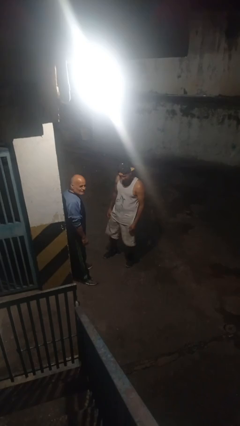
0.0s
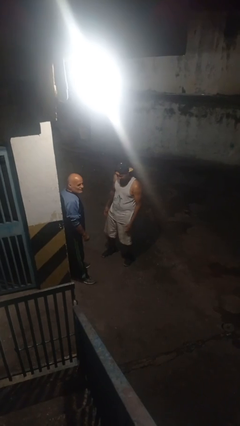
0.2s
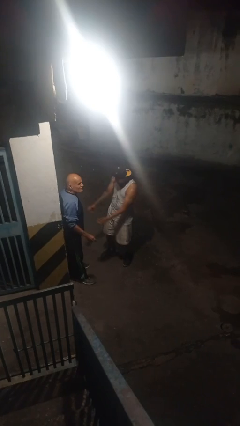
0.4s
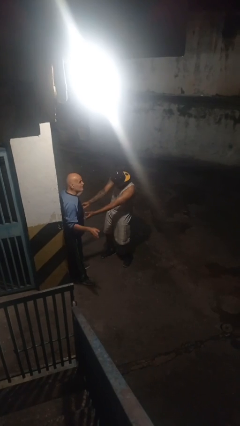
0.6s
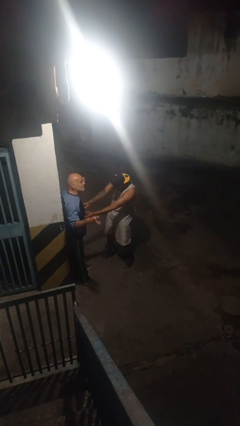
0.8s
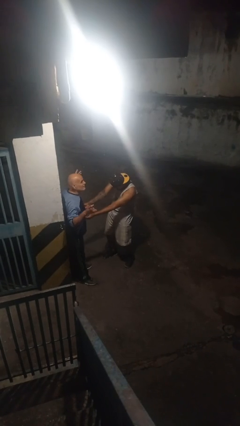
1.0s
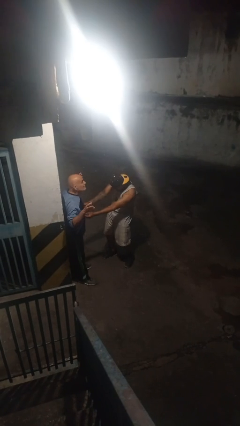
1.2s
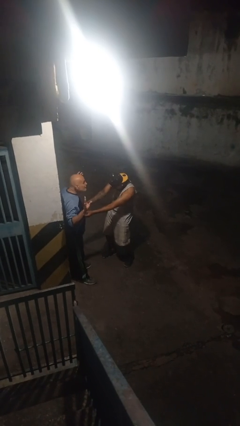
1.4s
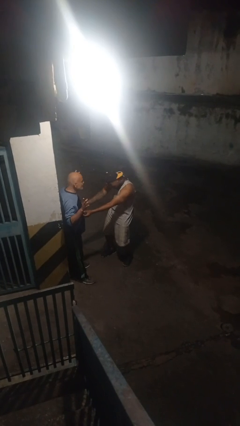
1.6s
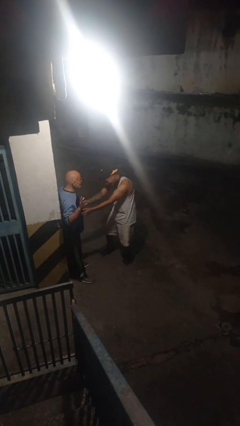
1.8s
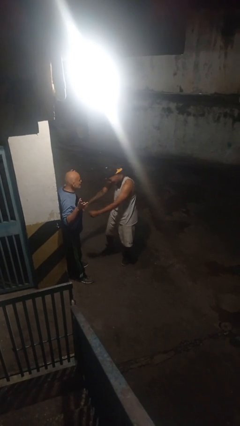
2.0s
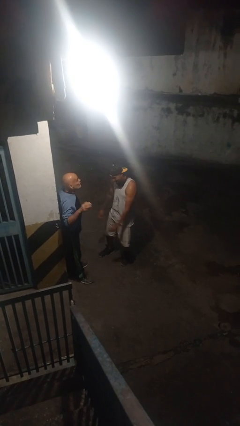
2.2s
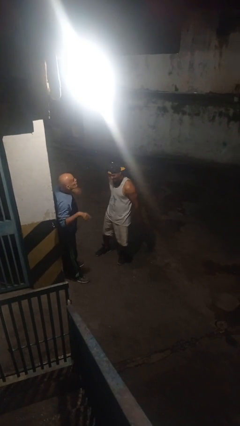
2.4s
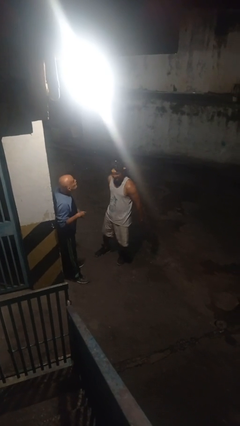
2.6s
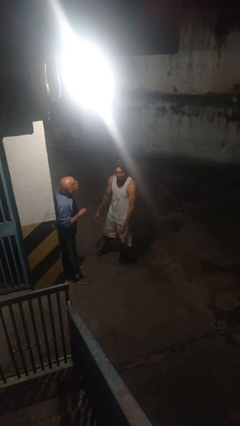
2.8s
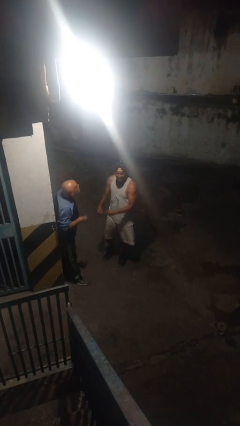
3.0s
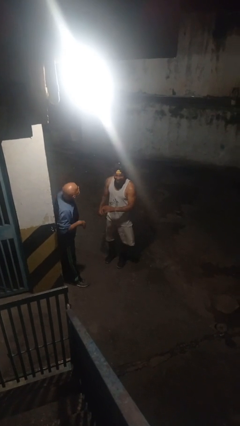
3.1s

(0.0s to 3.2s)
person tickles person

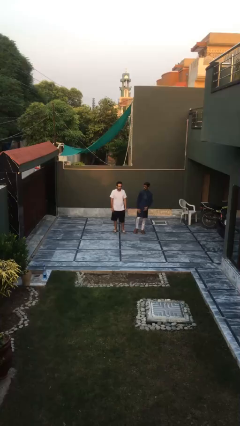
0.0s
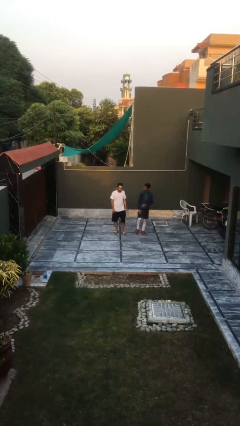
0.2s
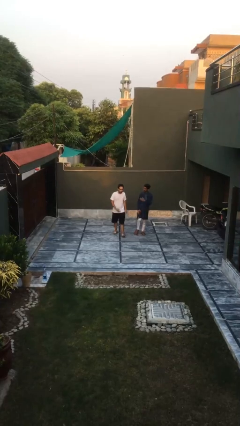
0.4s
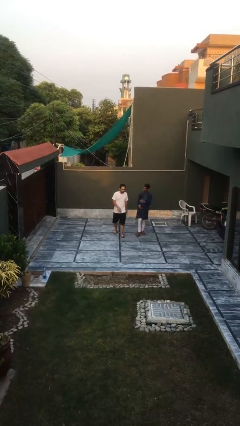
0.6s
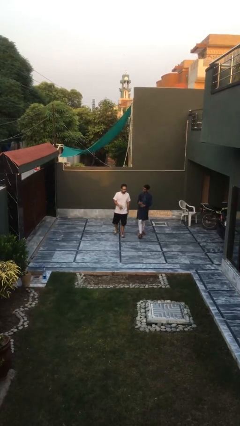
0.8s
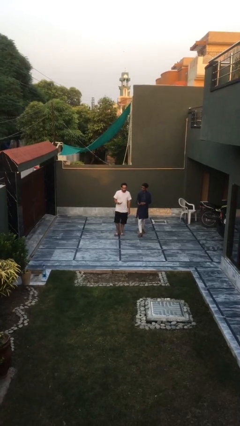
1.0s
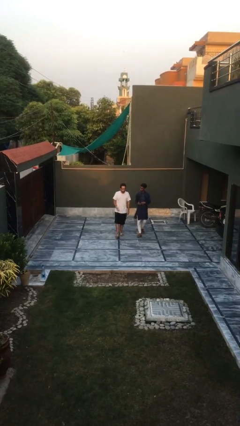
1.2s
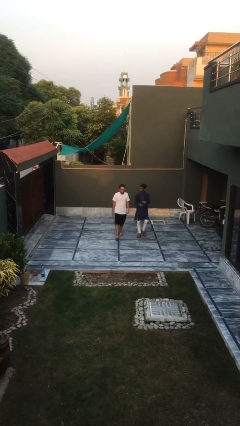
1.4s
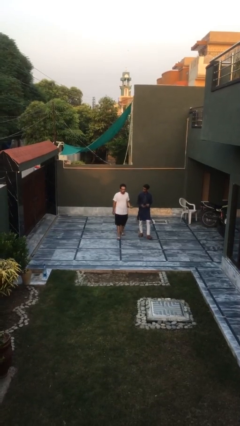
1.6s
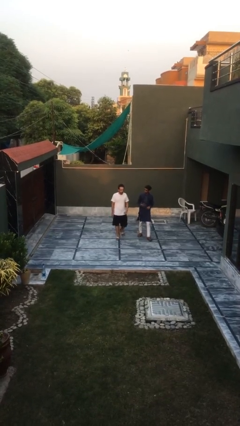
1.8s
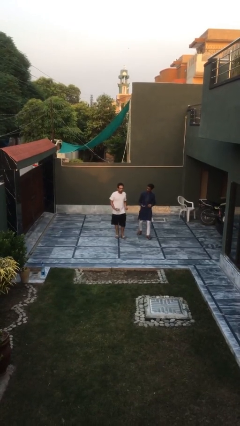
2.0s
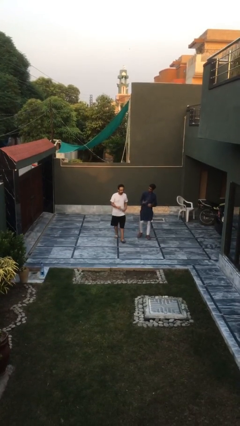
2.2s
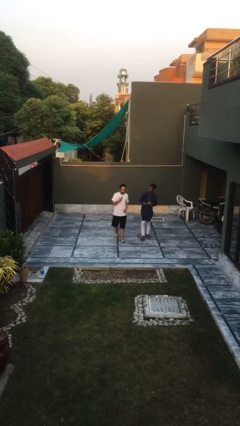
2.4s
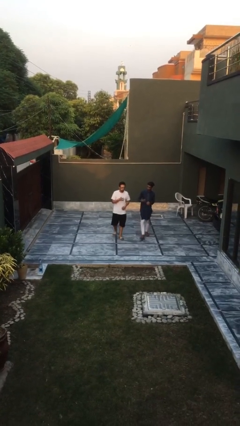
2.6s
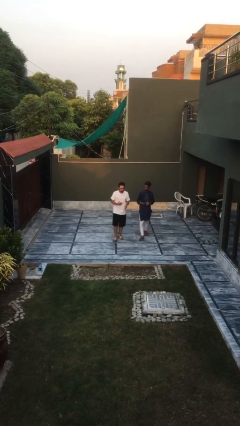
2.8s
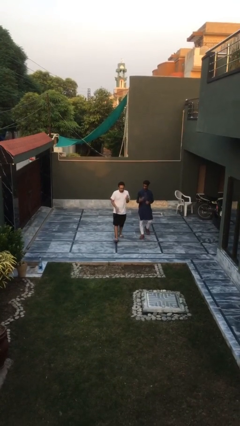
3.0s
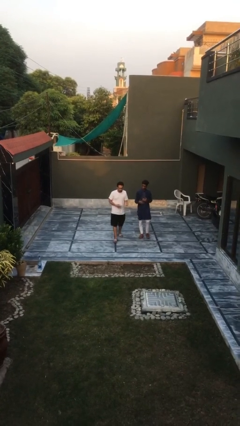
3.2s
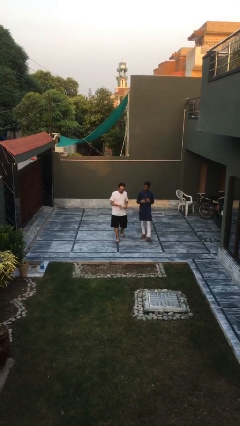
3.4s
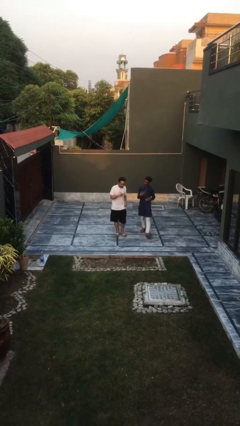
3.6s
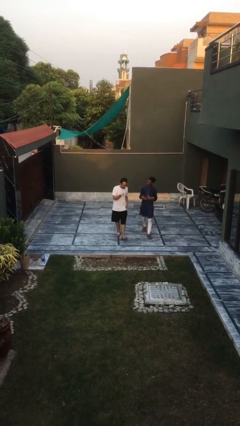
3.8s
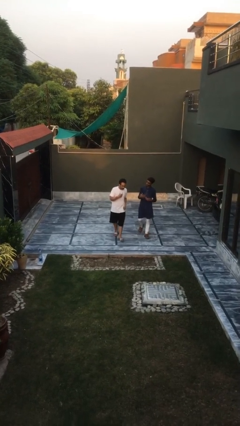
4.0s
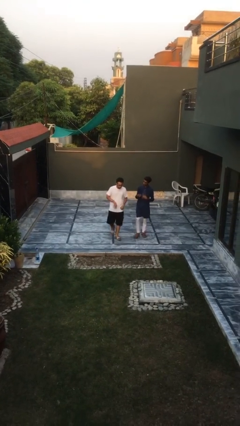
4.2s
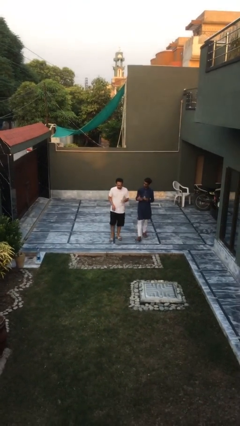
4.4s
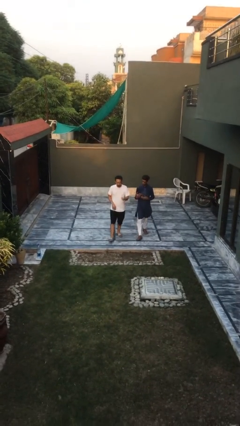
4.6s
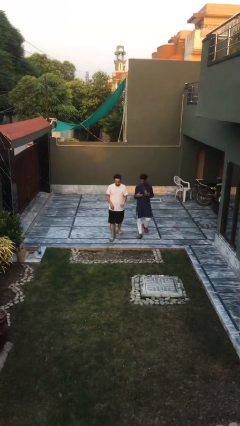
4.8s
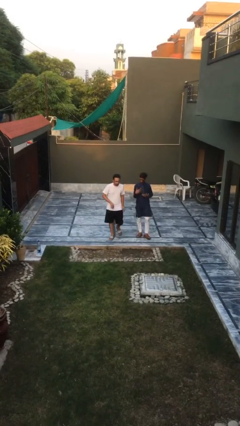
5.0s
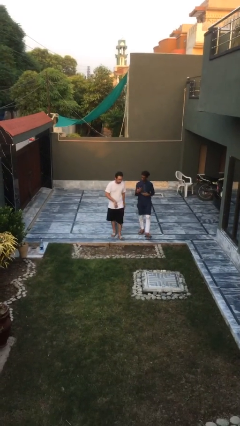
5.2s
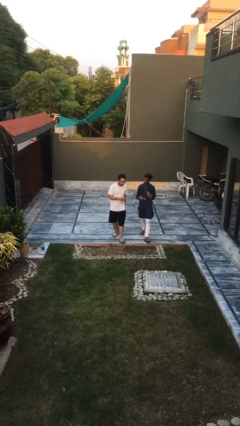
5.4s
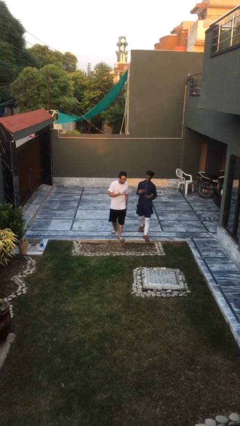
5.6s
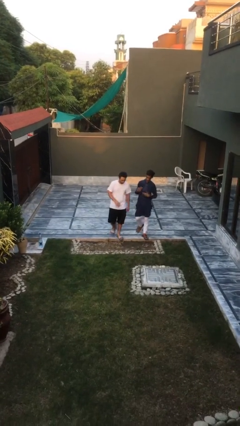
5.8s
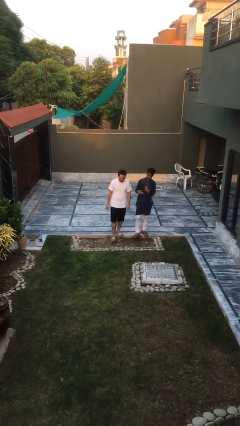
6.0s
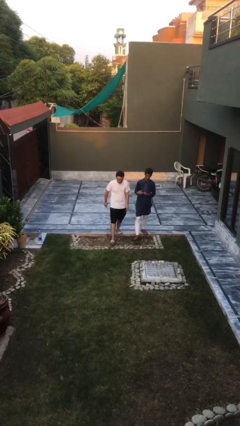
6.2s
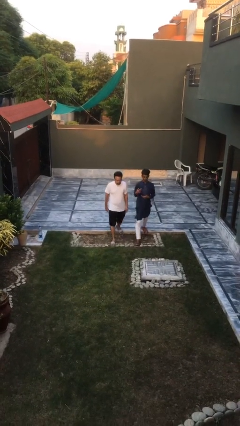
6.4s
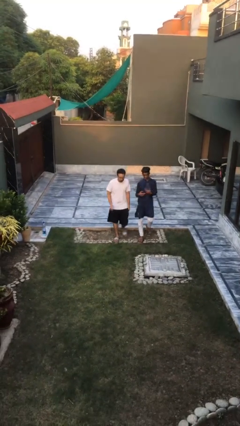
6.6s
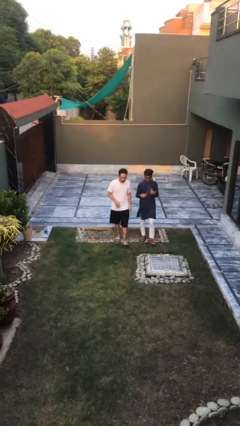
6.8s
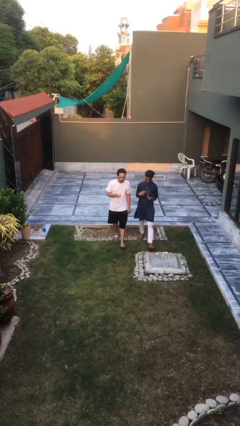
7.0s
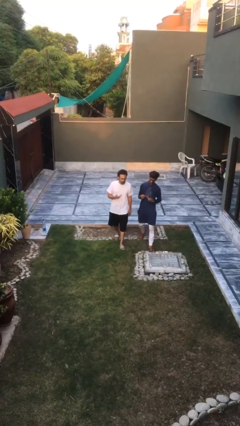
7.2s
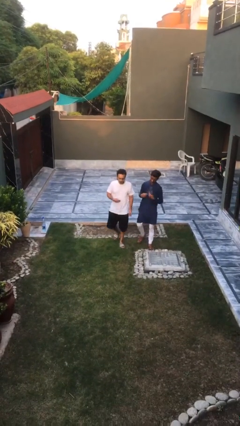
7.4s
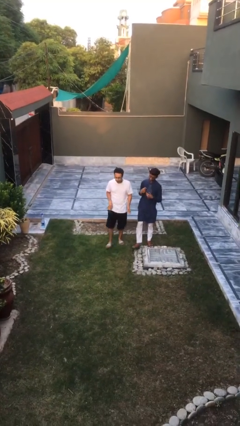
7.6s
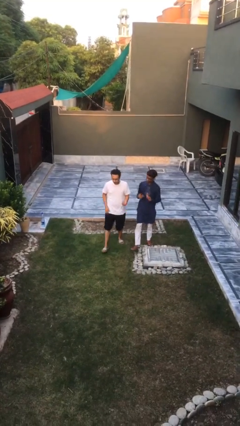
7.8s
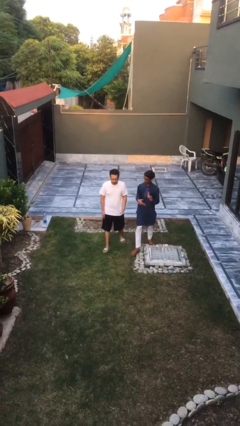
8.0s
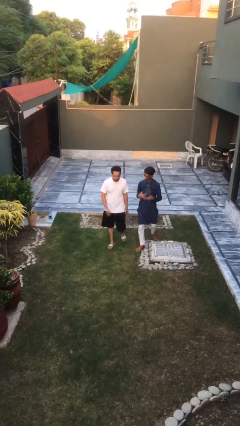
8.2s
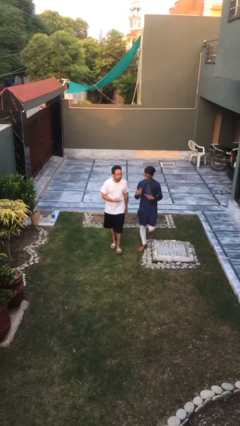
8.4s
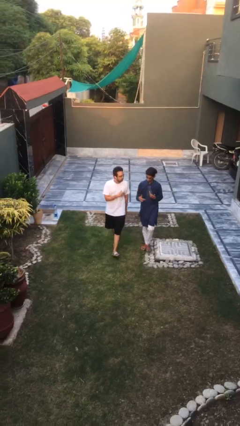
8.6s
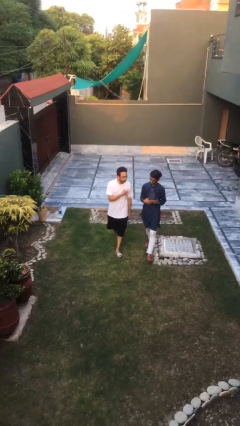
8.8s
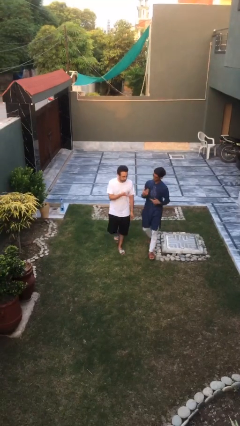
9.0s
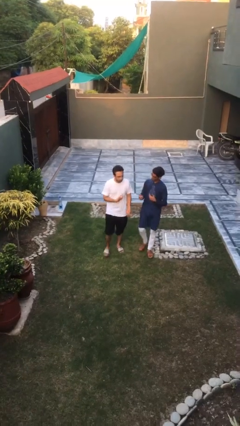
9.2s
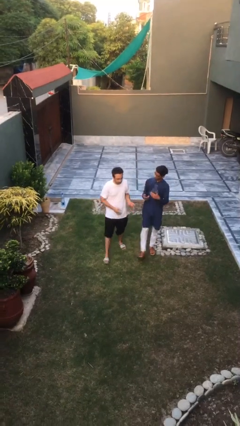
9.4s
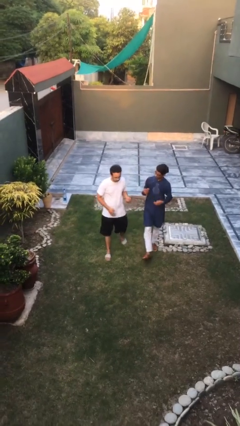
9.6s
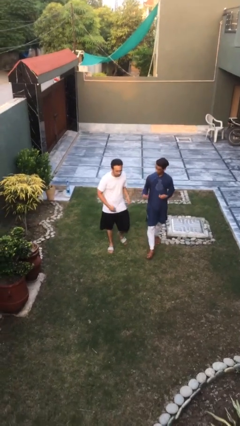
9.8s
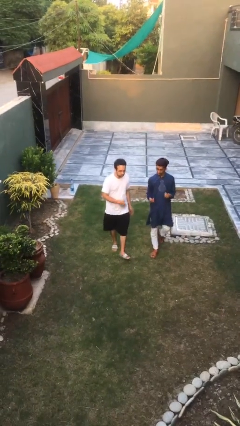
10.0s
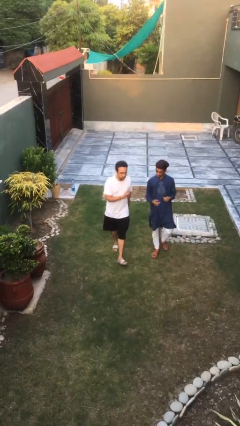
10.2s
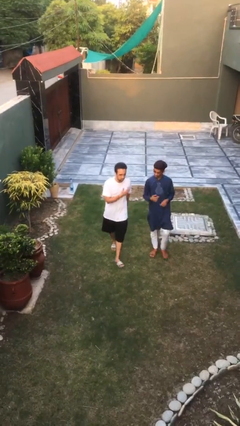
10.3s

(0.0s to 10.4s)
person talks to person

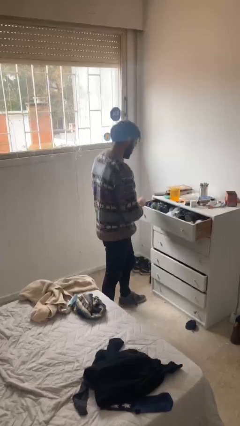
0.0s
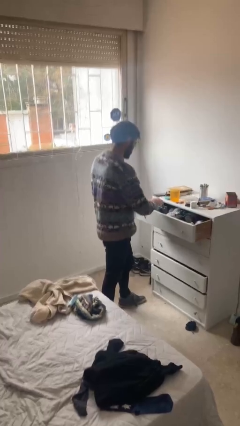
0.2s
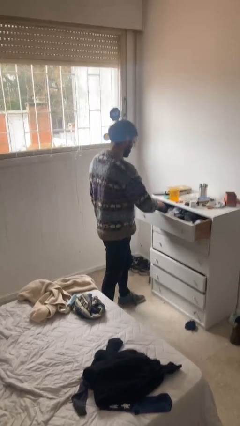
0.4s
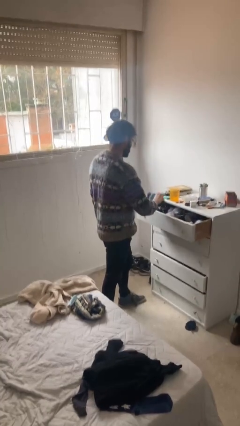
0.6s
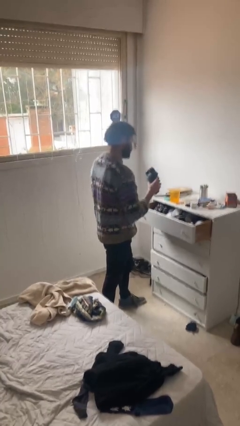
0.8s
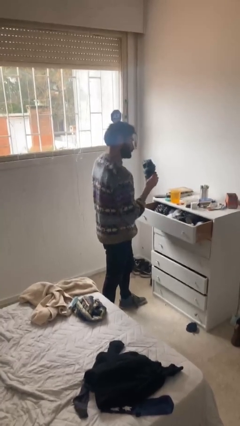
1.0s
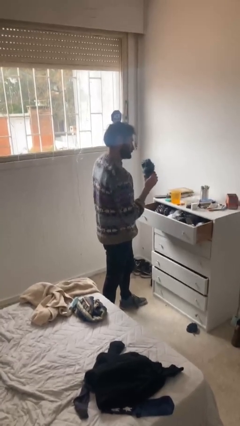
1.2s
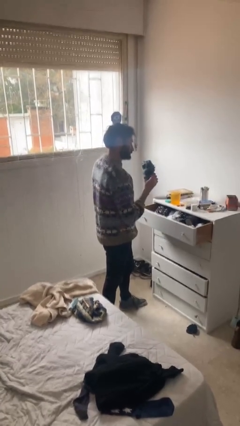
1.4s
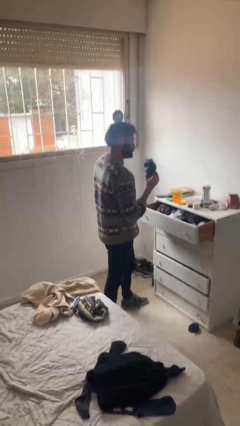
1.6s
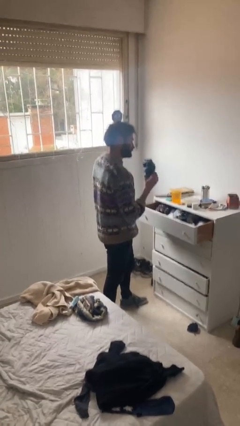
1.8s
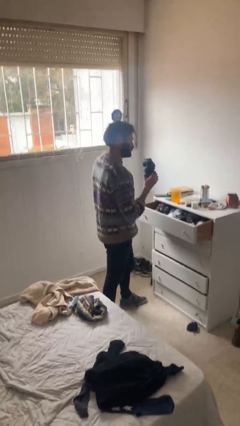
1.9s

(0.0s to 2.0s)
person takes clothes from dresser

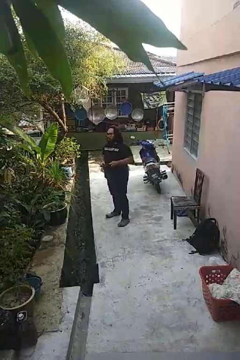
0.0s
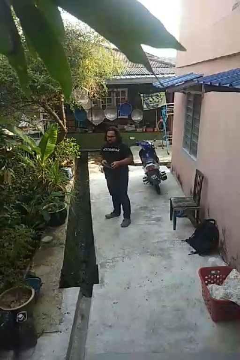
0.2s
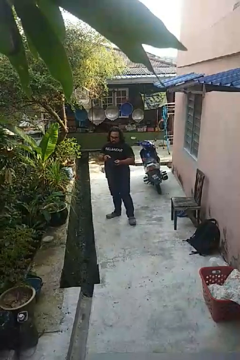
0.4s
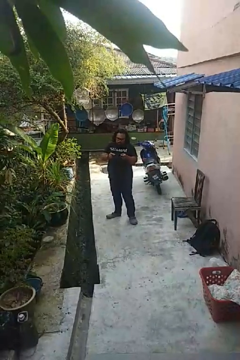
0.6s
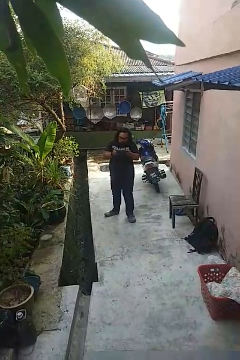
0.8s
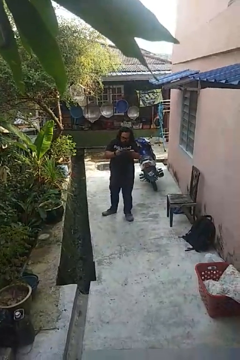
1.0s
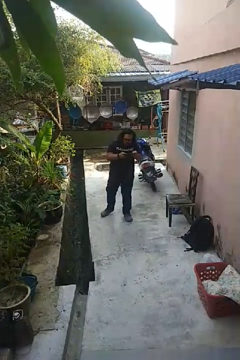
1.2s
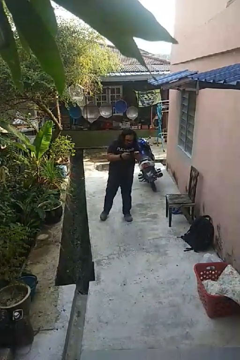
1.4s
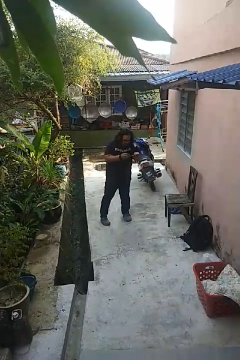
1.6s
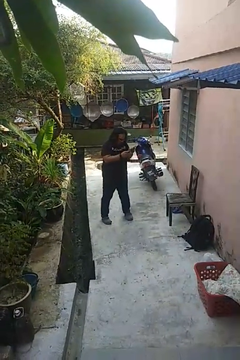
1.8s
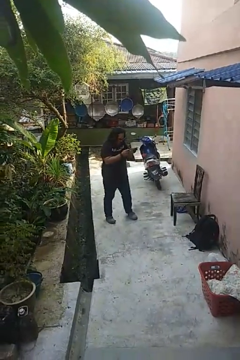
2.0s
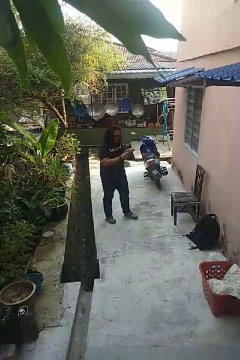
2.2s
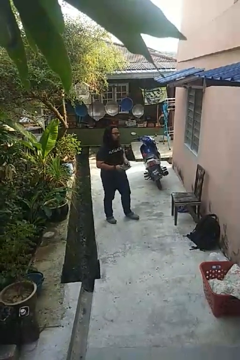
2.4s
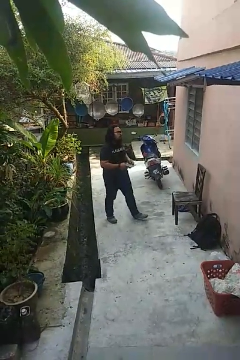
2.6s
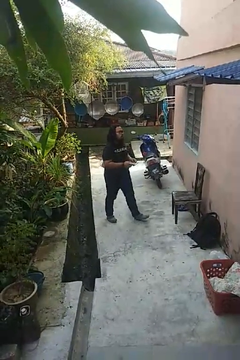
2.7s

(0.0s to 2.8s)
person interacts with handheld game

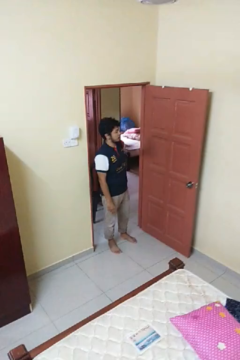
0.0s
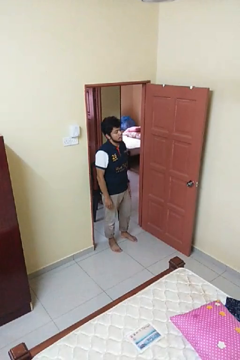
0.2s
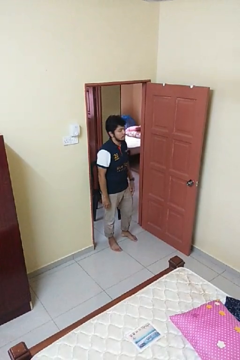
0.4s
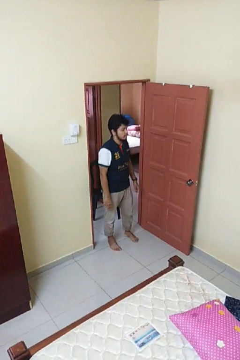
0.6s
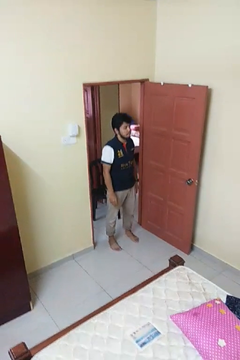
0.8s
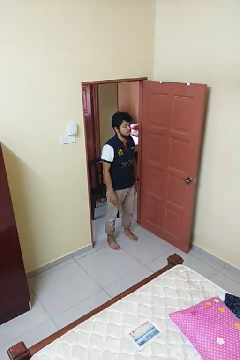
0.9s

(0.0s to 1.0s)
person gestures lower hand
